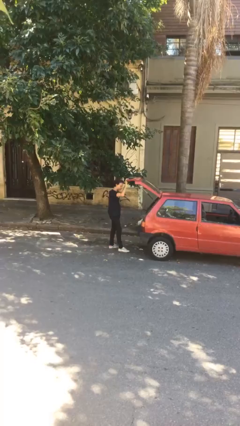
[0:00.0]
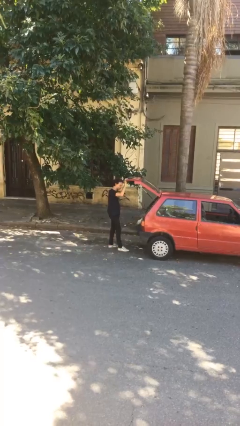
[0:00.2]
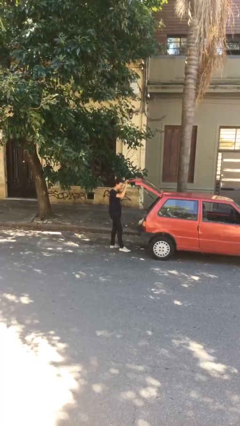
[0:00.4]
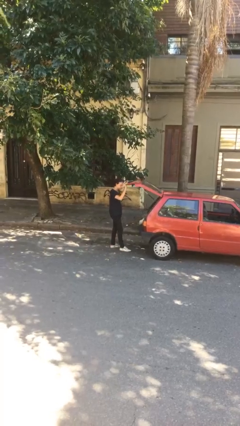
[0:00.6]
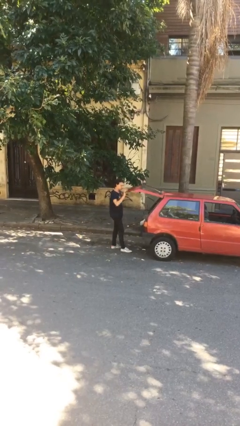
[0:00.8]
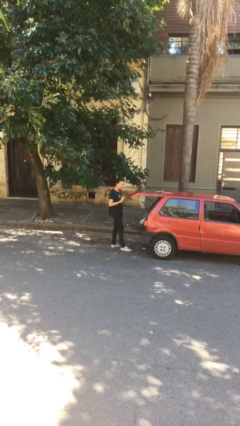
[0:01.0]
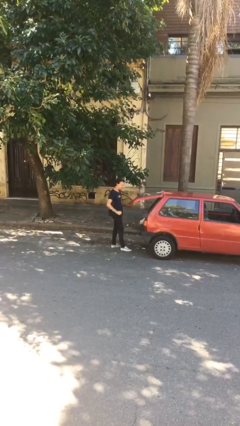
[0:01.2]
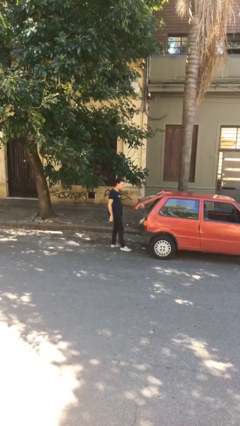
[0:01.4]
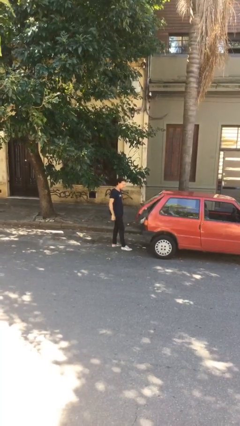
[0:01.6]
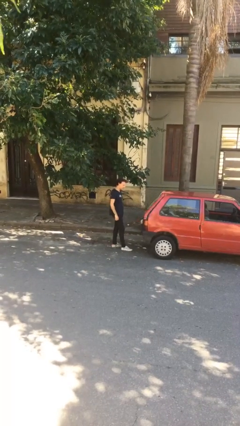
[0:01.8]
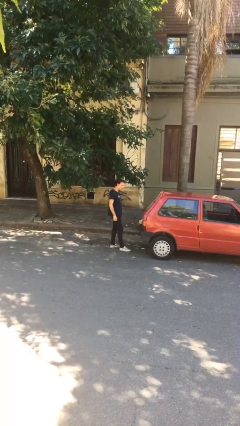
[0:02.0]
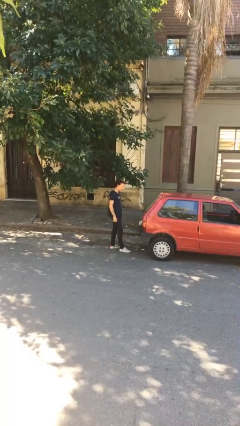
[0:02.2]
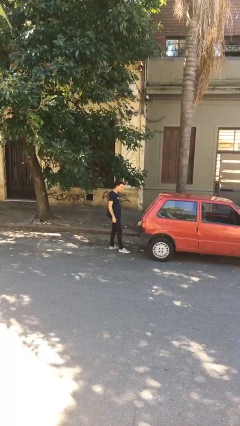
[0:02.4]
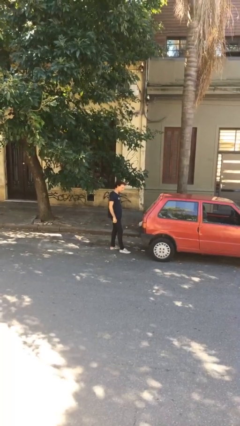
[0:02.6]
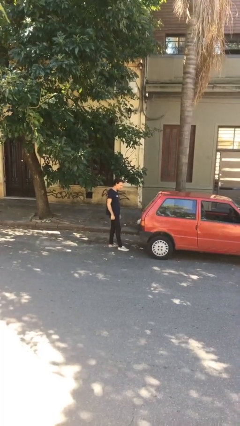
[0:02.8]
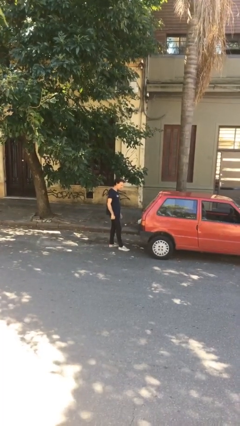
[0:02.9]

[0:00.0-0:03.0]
person closes car trunk

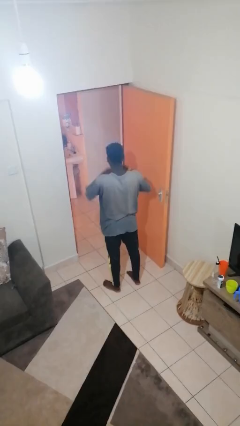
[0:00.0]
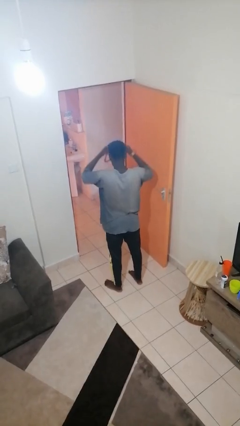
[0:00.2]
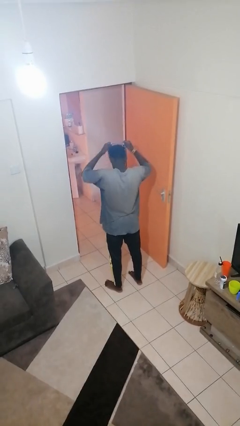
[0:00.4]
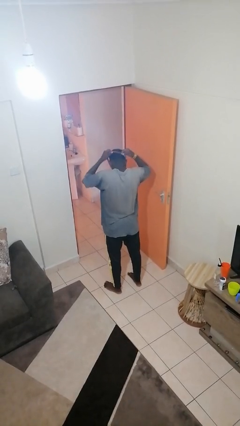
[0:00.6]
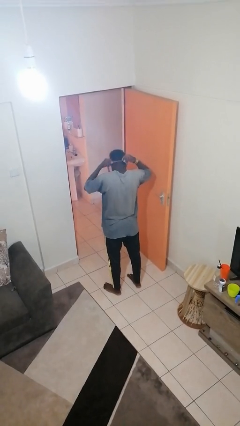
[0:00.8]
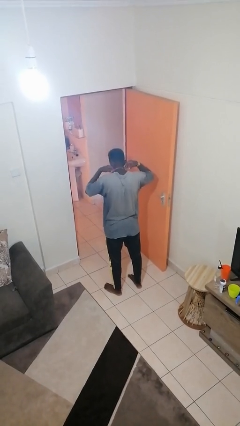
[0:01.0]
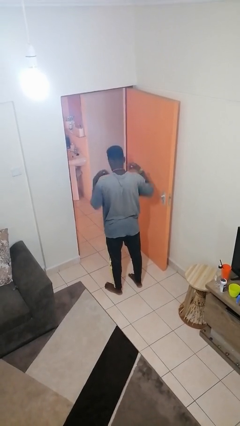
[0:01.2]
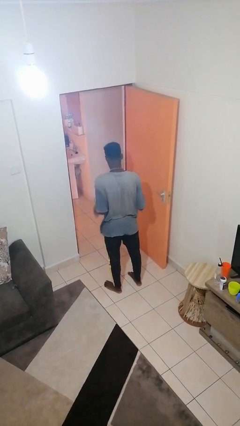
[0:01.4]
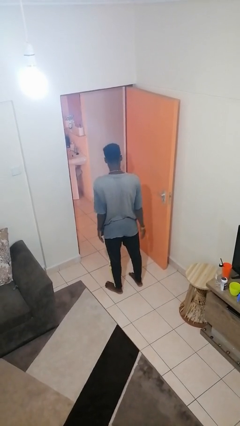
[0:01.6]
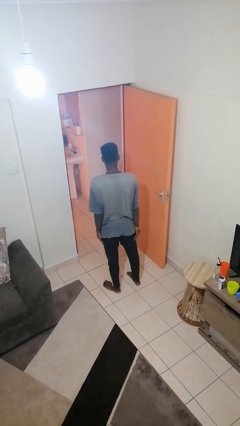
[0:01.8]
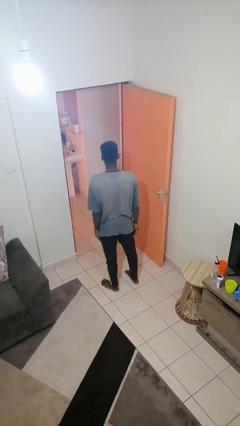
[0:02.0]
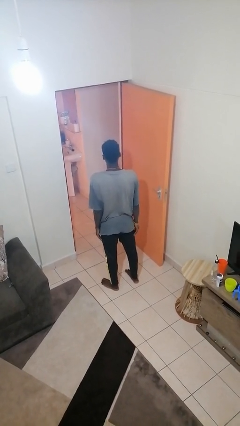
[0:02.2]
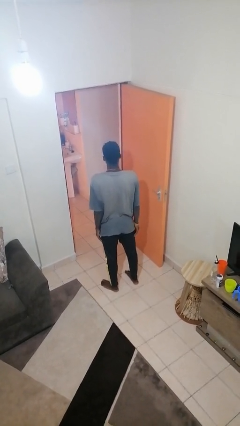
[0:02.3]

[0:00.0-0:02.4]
person puts on necklace

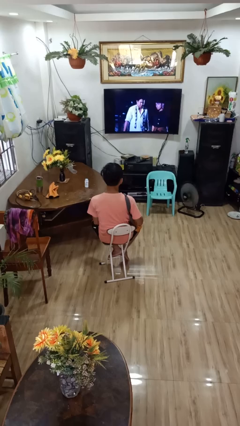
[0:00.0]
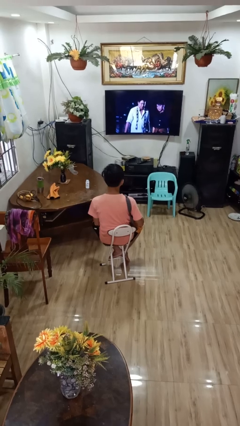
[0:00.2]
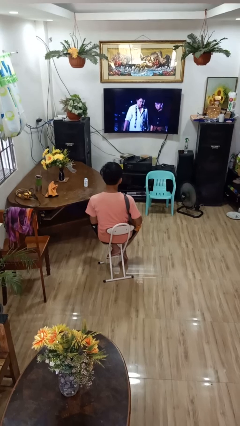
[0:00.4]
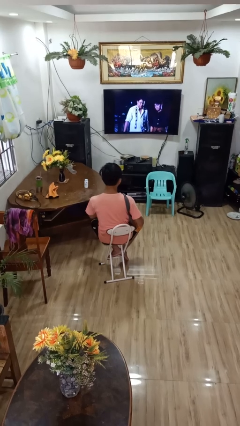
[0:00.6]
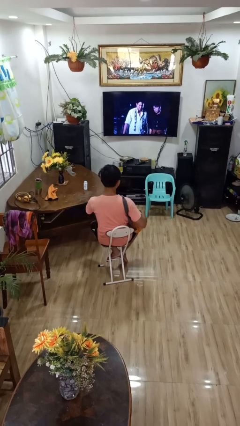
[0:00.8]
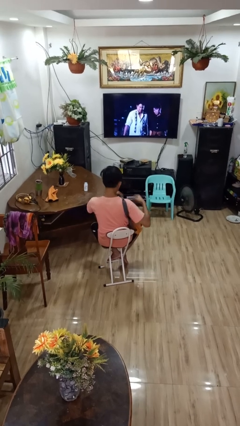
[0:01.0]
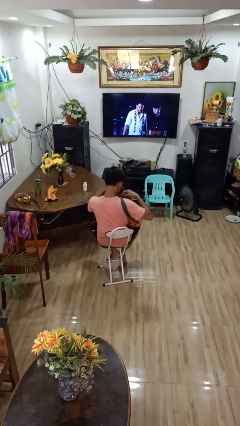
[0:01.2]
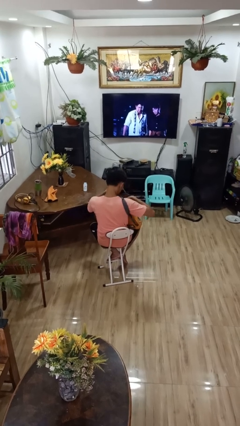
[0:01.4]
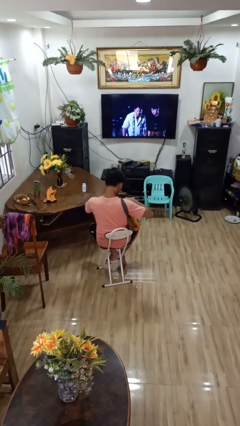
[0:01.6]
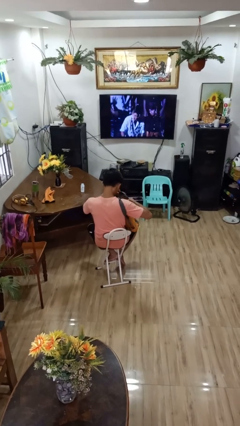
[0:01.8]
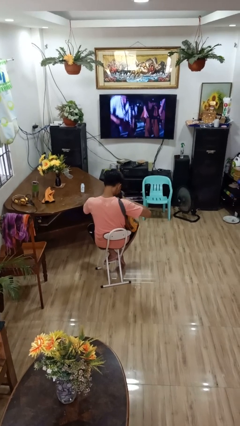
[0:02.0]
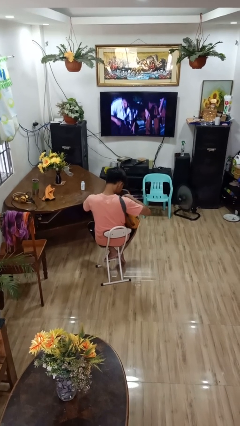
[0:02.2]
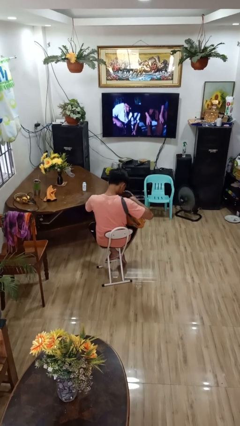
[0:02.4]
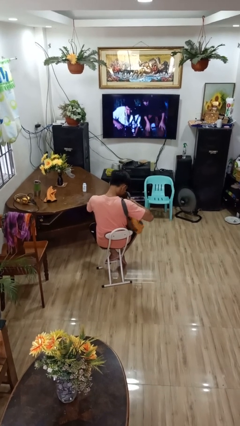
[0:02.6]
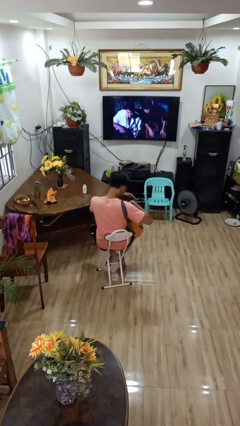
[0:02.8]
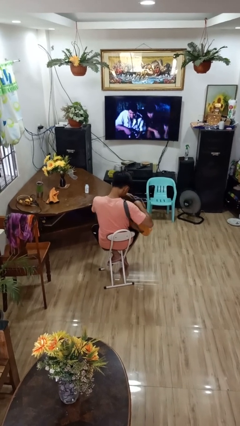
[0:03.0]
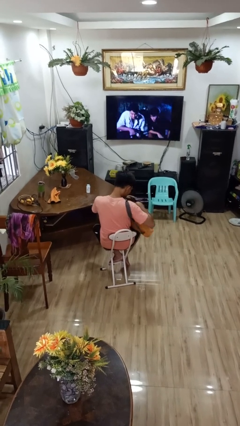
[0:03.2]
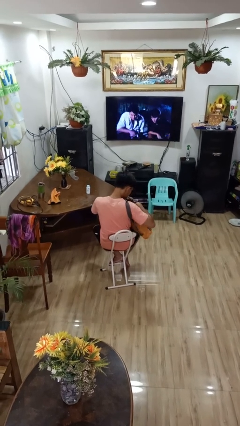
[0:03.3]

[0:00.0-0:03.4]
person searches in backpack

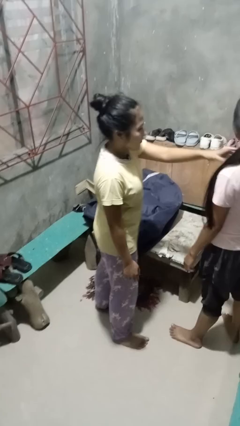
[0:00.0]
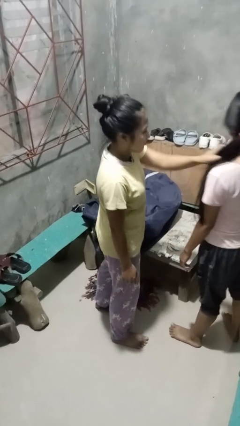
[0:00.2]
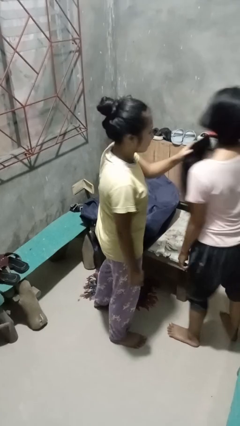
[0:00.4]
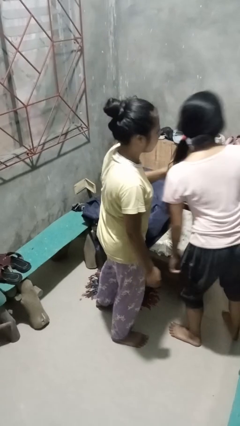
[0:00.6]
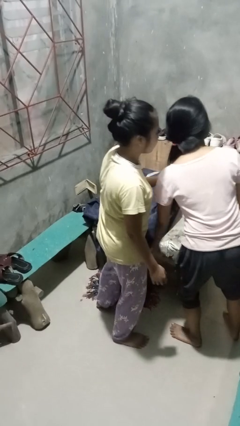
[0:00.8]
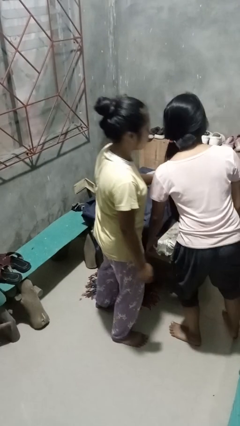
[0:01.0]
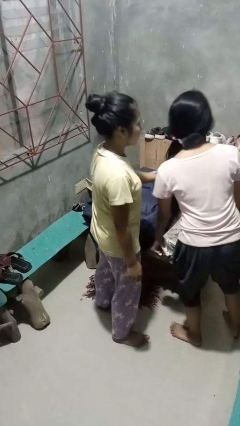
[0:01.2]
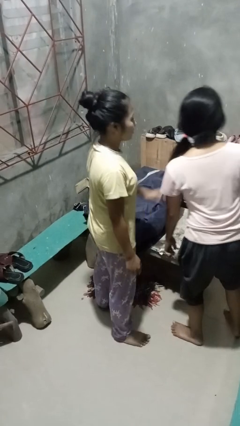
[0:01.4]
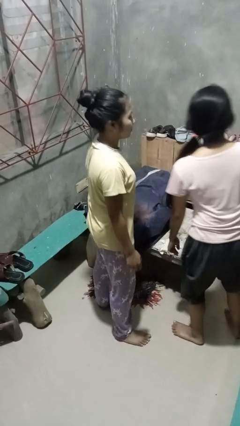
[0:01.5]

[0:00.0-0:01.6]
person grabs person by hair

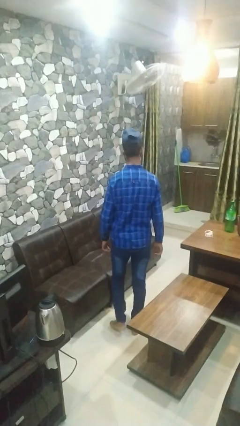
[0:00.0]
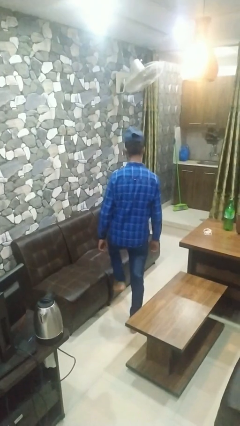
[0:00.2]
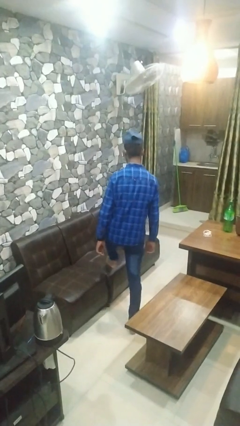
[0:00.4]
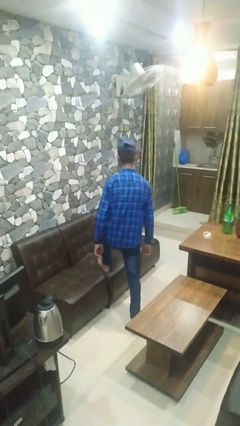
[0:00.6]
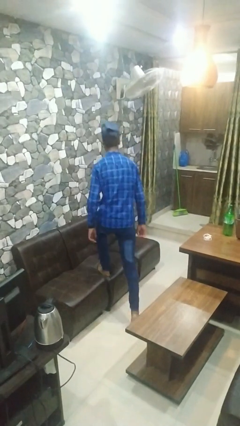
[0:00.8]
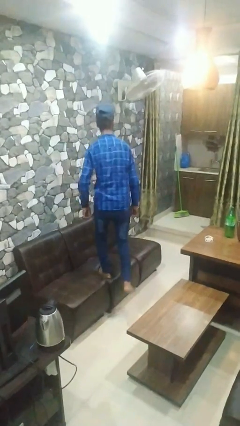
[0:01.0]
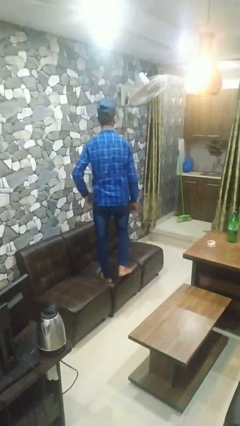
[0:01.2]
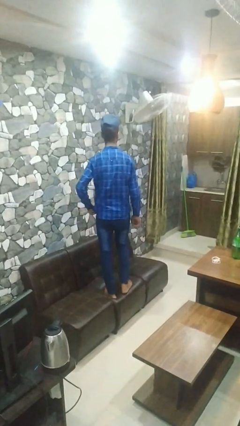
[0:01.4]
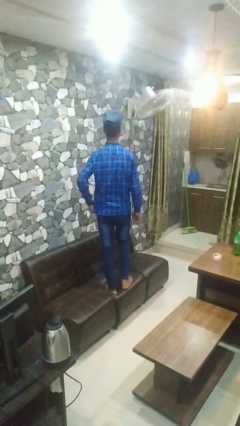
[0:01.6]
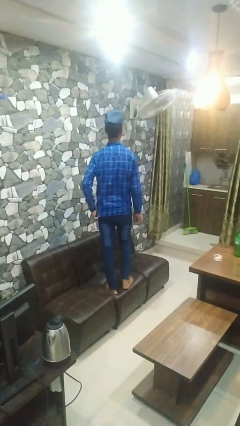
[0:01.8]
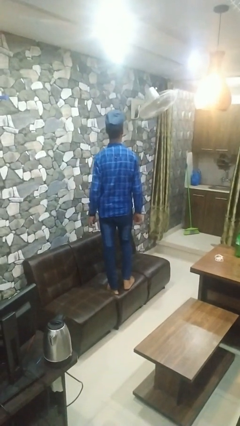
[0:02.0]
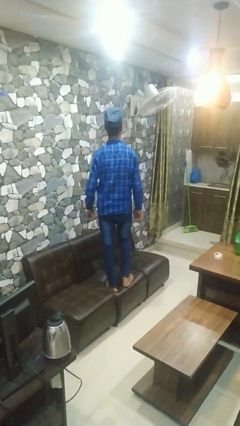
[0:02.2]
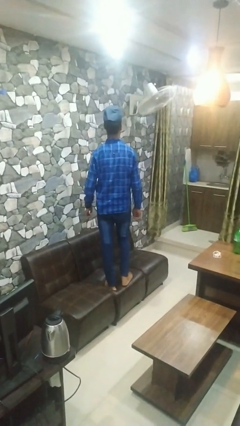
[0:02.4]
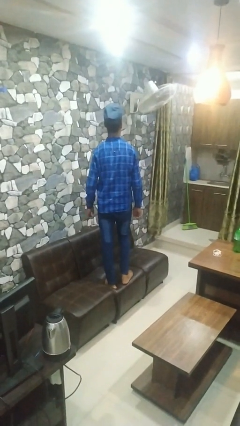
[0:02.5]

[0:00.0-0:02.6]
person climbs on couch

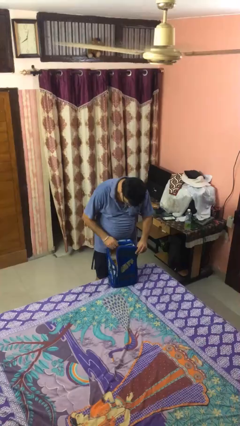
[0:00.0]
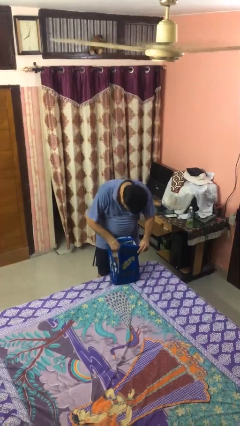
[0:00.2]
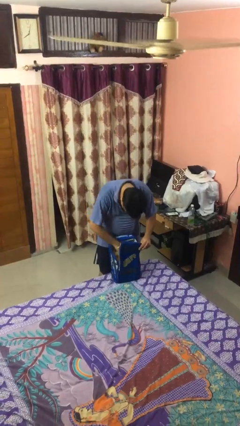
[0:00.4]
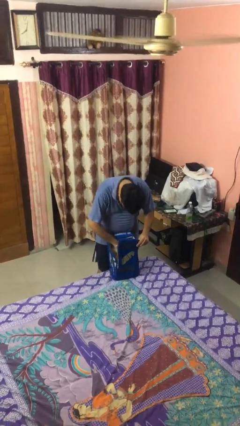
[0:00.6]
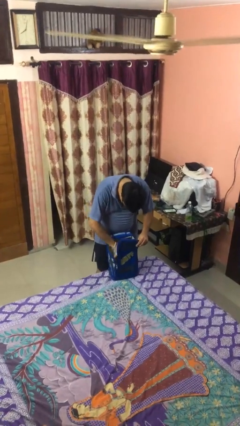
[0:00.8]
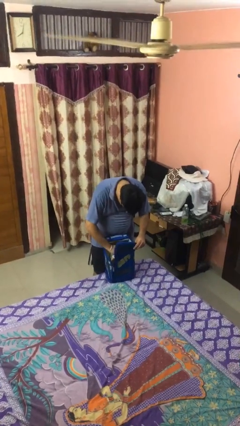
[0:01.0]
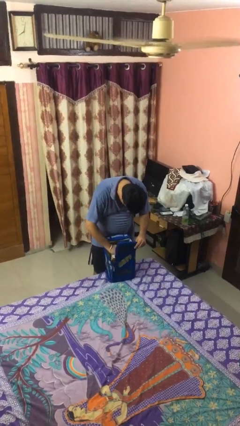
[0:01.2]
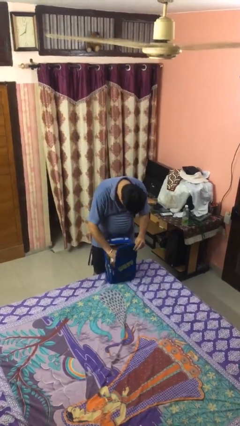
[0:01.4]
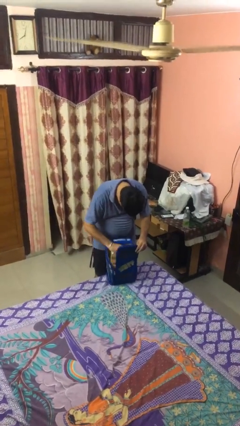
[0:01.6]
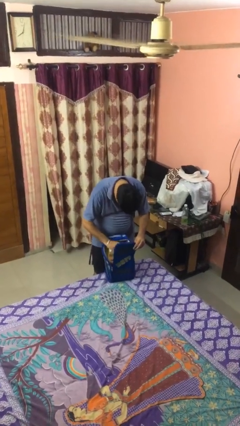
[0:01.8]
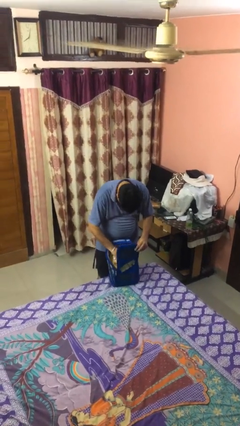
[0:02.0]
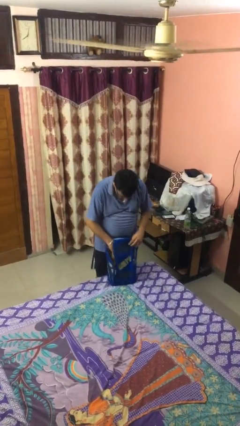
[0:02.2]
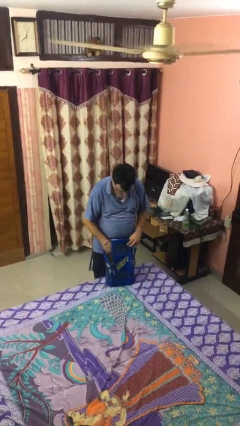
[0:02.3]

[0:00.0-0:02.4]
person searches in bag

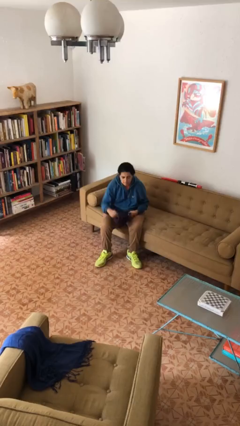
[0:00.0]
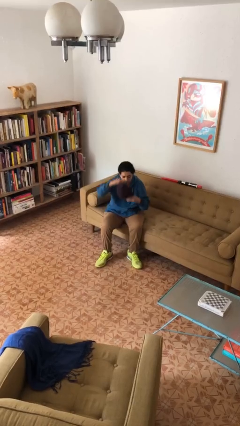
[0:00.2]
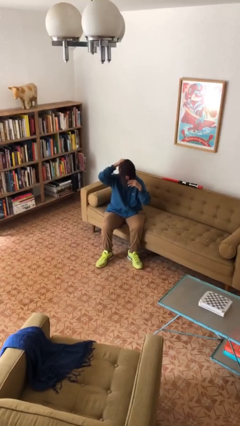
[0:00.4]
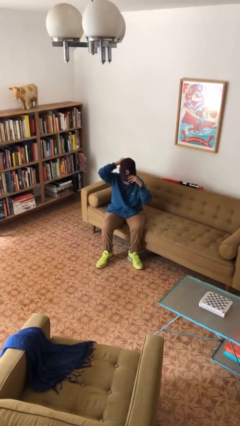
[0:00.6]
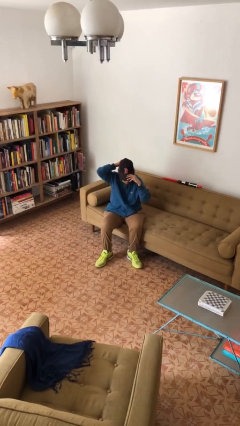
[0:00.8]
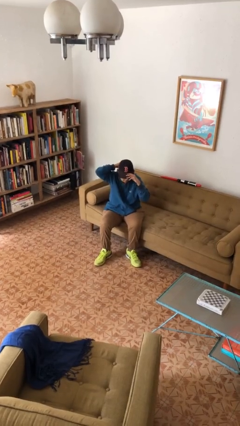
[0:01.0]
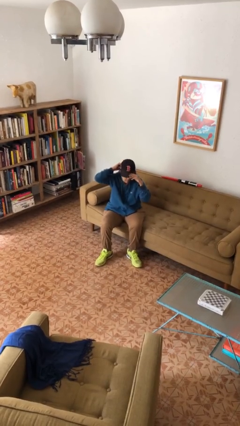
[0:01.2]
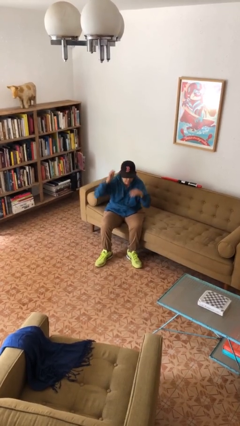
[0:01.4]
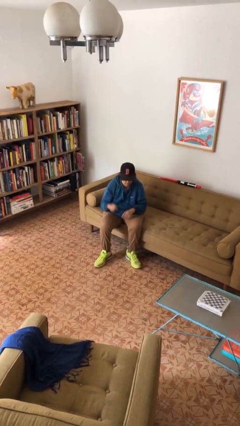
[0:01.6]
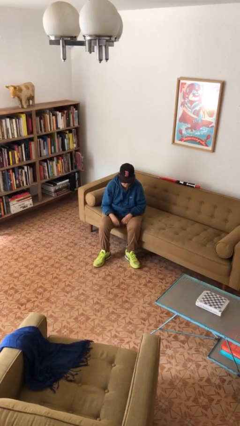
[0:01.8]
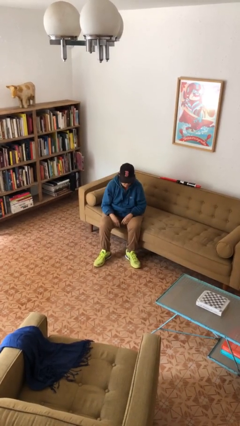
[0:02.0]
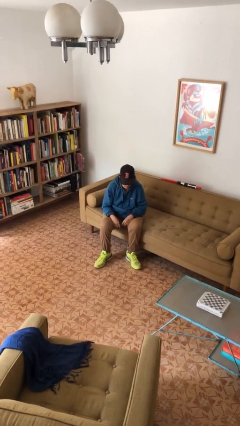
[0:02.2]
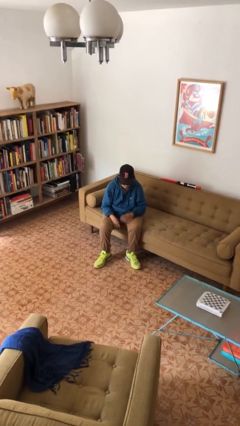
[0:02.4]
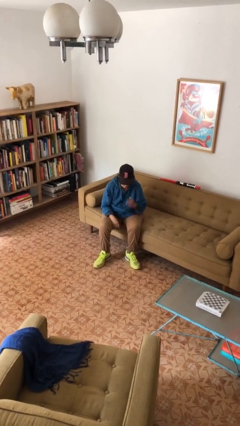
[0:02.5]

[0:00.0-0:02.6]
person puts on hat
